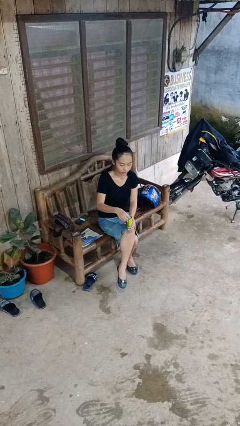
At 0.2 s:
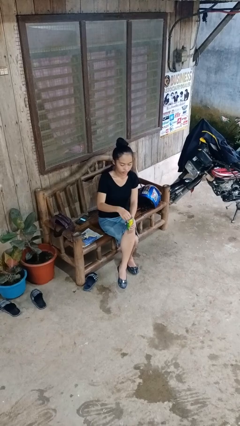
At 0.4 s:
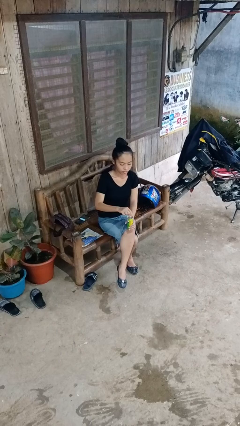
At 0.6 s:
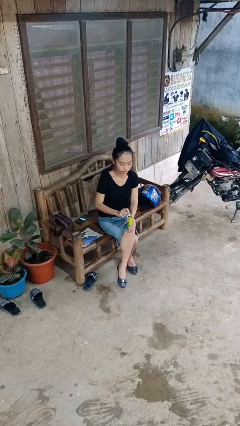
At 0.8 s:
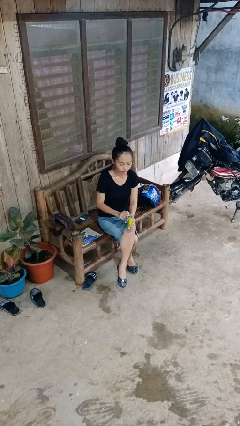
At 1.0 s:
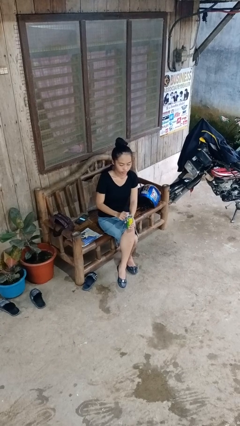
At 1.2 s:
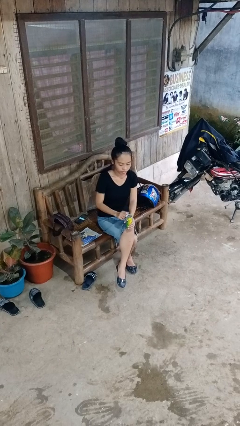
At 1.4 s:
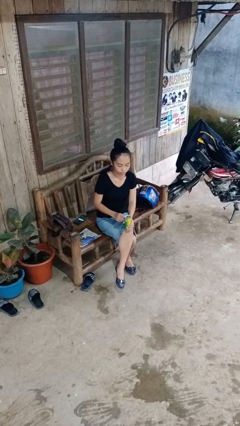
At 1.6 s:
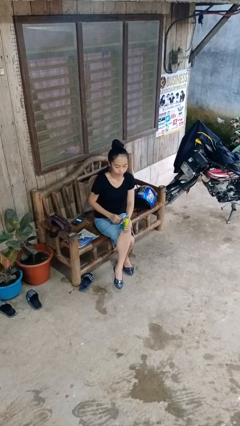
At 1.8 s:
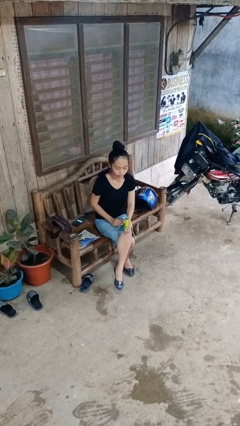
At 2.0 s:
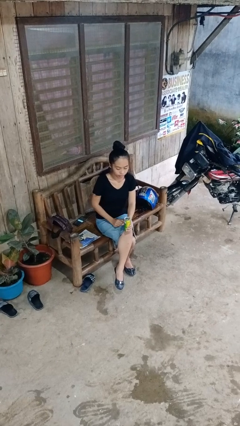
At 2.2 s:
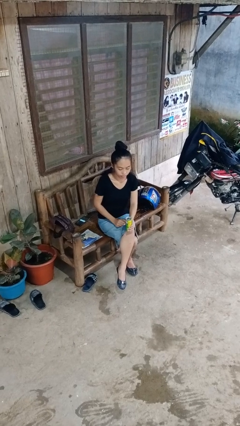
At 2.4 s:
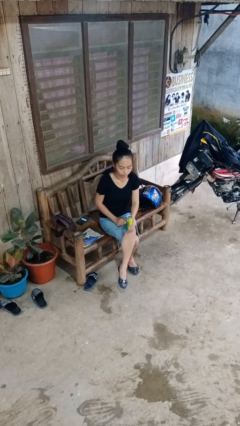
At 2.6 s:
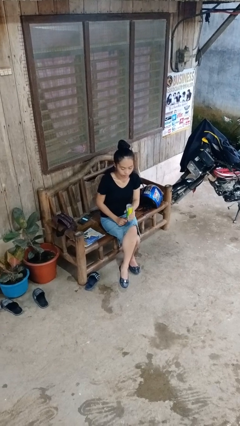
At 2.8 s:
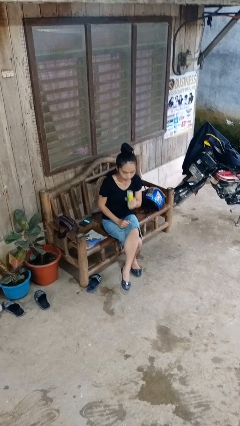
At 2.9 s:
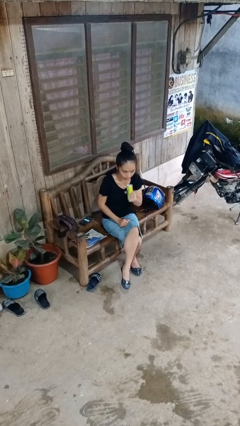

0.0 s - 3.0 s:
person opens beverage can

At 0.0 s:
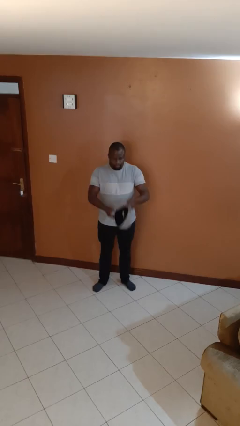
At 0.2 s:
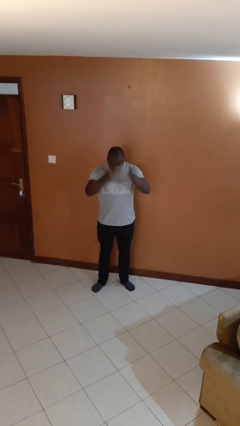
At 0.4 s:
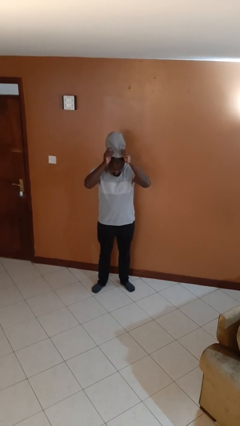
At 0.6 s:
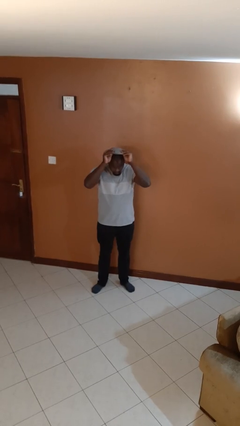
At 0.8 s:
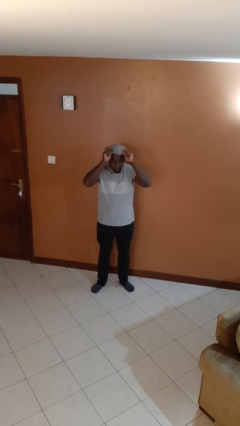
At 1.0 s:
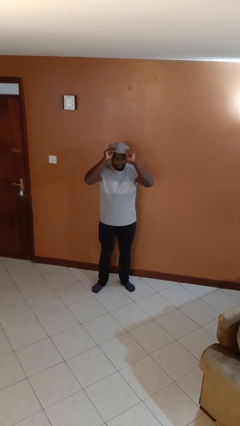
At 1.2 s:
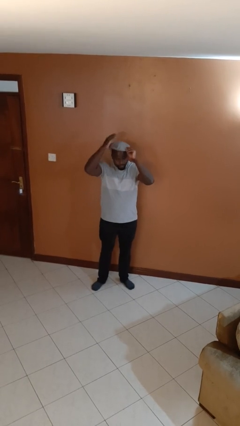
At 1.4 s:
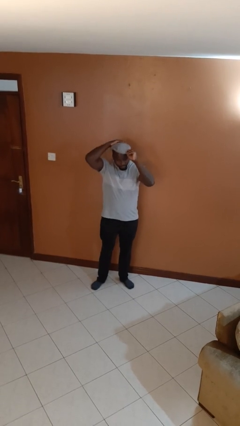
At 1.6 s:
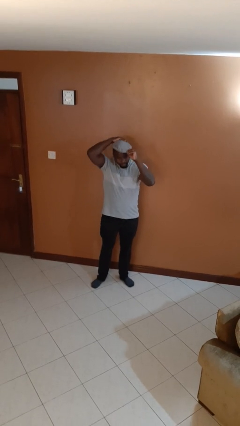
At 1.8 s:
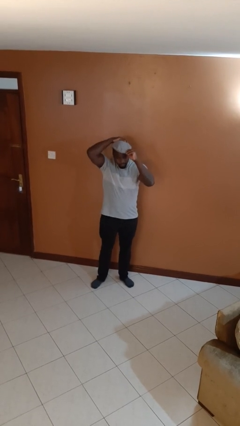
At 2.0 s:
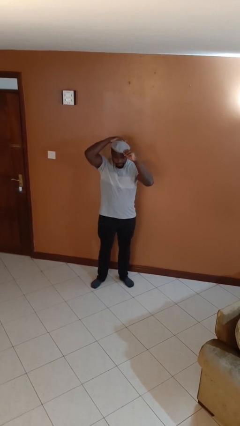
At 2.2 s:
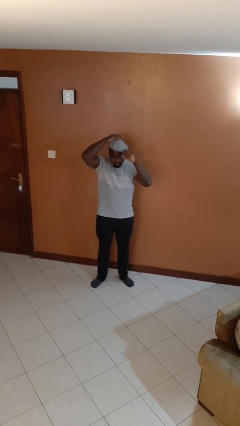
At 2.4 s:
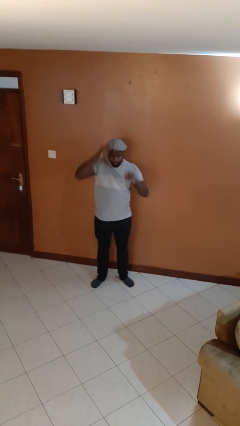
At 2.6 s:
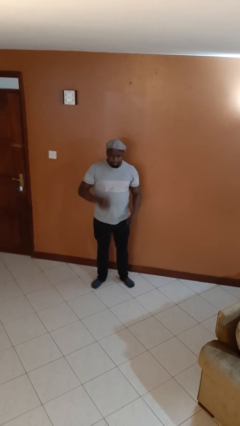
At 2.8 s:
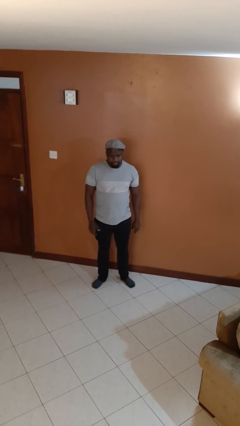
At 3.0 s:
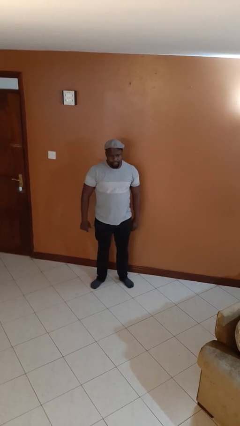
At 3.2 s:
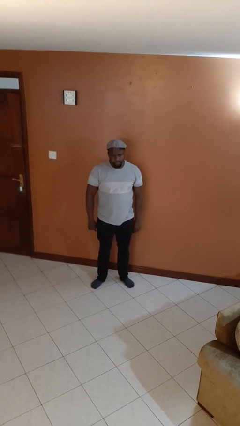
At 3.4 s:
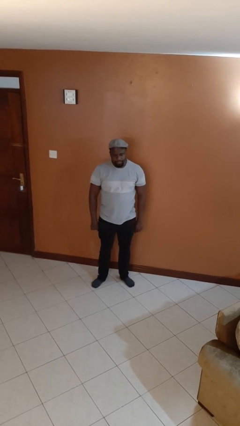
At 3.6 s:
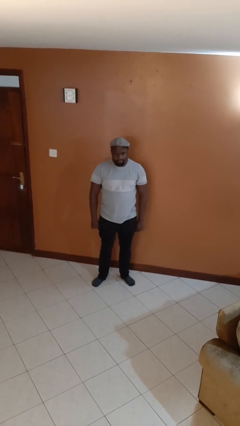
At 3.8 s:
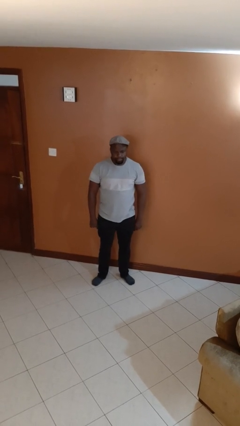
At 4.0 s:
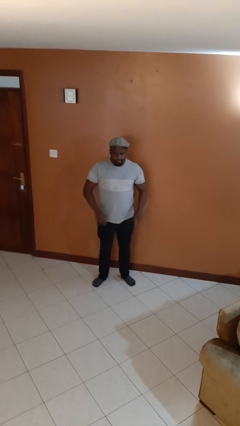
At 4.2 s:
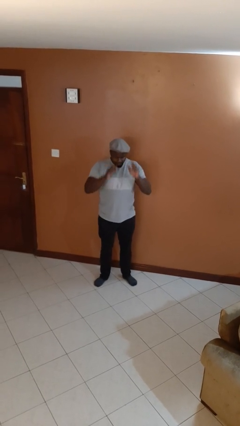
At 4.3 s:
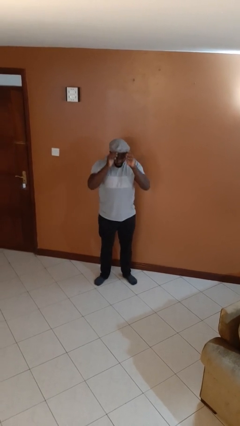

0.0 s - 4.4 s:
person puts on hat

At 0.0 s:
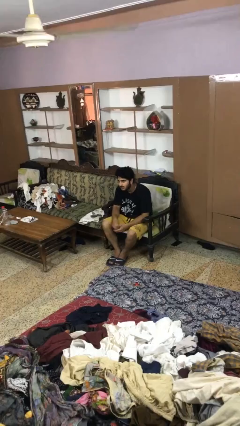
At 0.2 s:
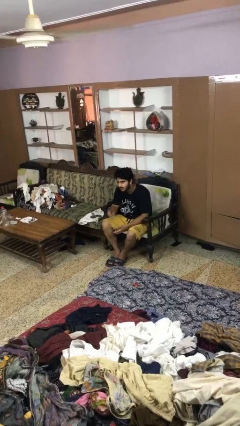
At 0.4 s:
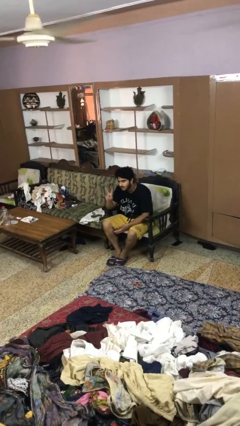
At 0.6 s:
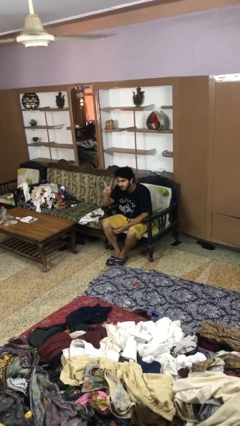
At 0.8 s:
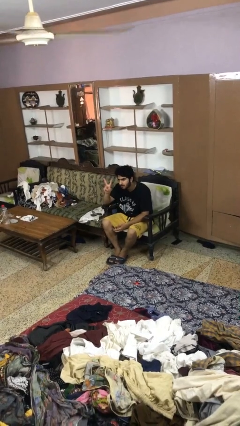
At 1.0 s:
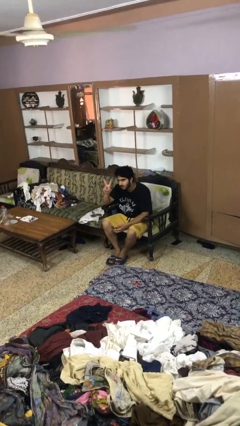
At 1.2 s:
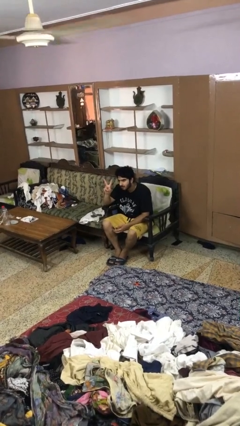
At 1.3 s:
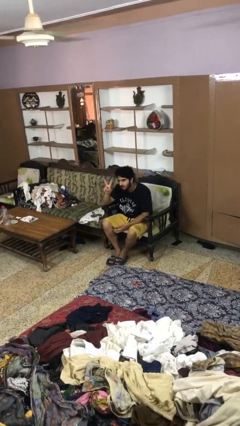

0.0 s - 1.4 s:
person gestures peace

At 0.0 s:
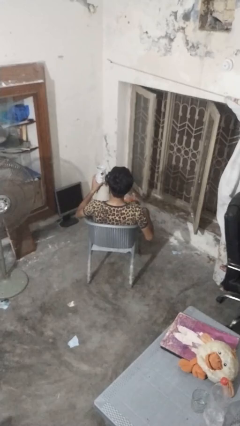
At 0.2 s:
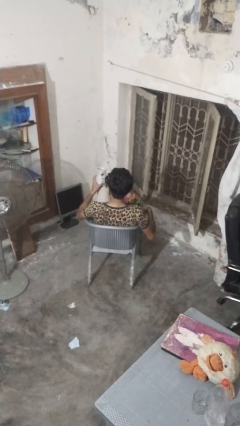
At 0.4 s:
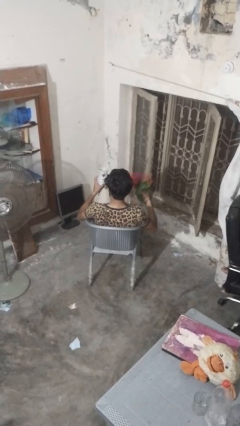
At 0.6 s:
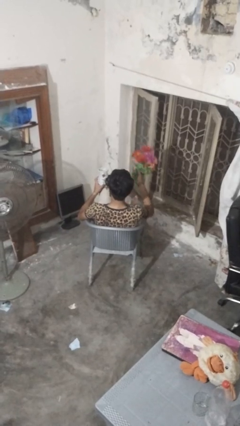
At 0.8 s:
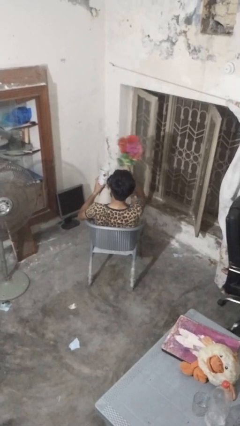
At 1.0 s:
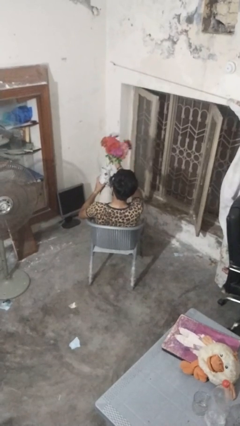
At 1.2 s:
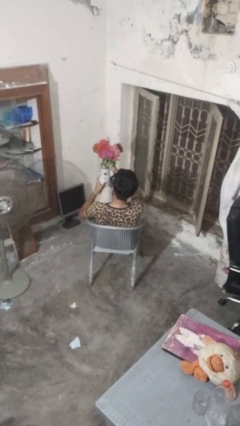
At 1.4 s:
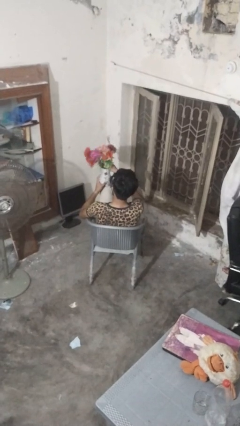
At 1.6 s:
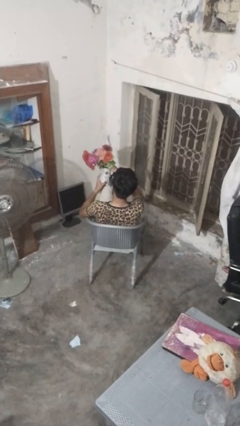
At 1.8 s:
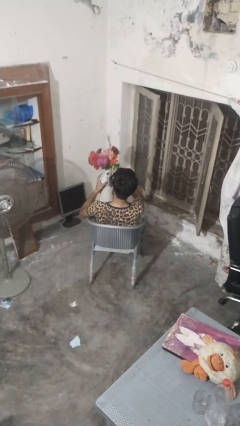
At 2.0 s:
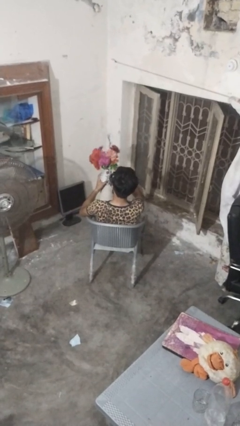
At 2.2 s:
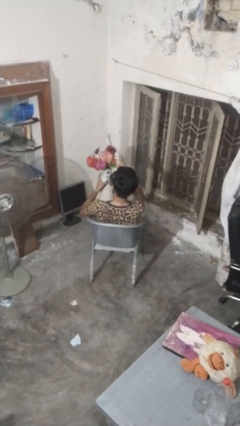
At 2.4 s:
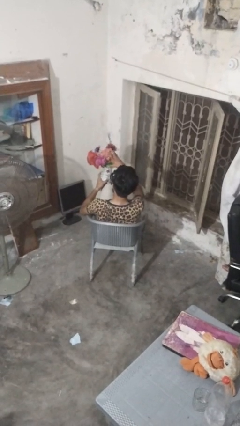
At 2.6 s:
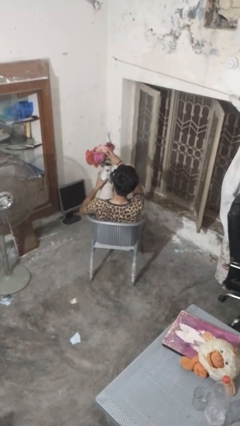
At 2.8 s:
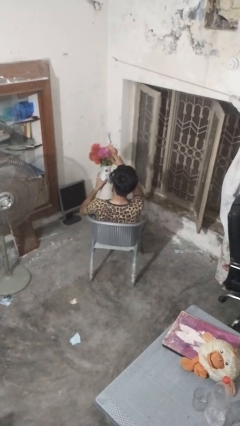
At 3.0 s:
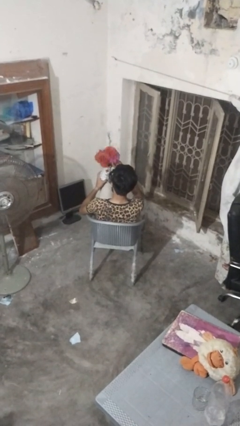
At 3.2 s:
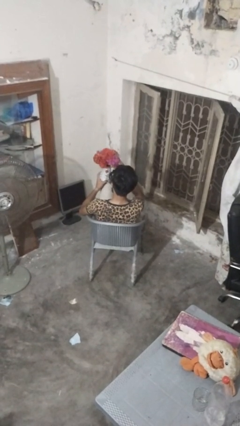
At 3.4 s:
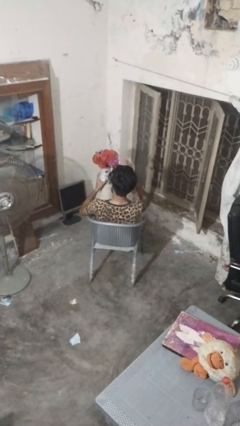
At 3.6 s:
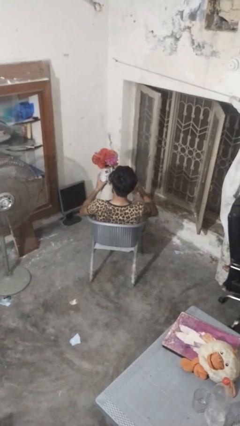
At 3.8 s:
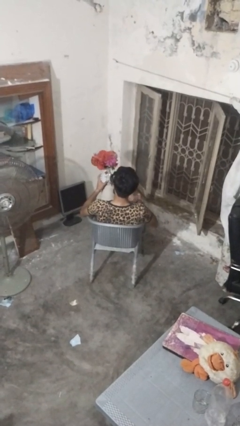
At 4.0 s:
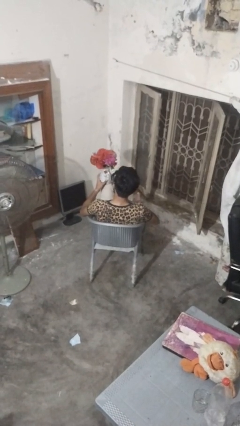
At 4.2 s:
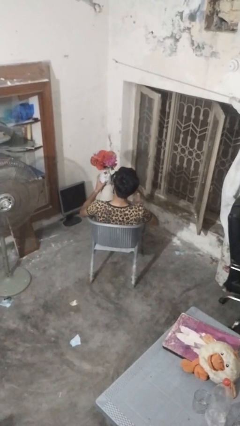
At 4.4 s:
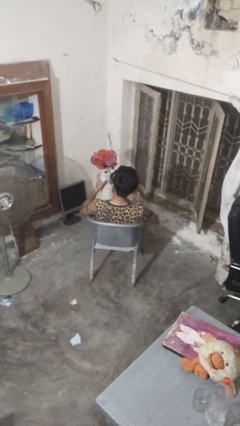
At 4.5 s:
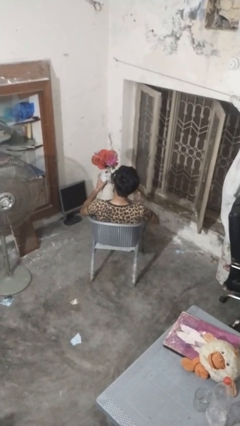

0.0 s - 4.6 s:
person arranges flowers in vase

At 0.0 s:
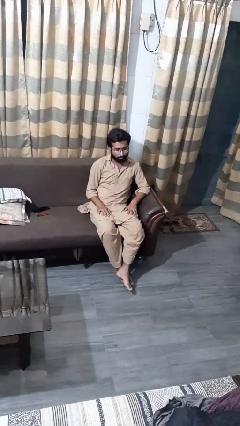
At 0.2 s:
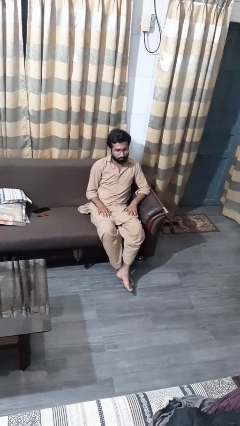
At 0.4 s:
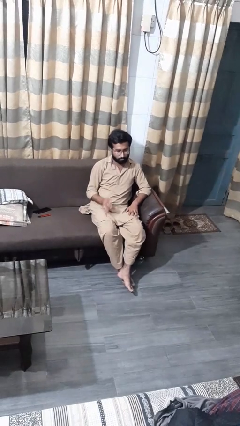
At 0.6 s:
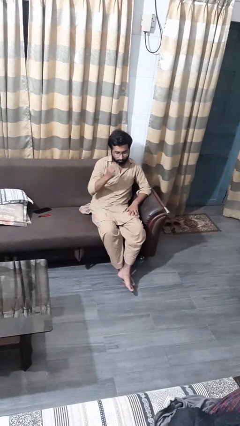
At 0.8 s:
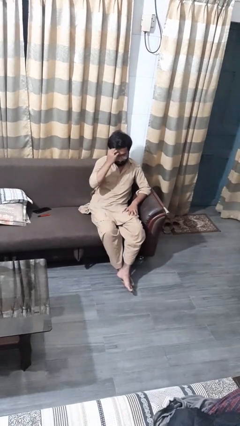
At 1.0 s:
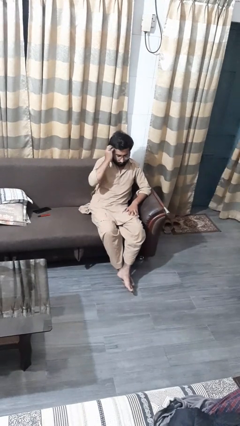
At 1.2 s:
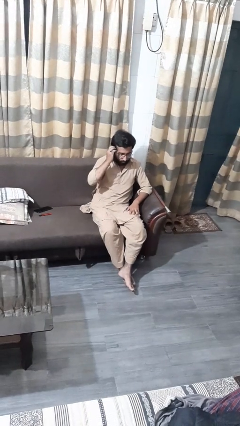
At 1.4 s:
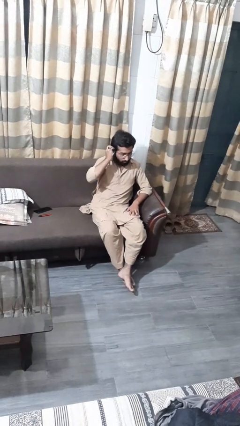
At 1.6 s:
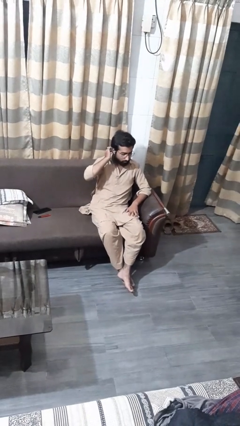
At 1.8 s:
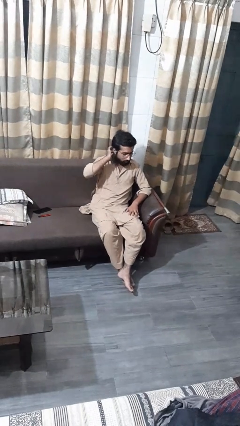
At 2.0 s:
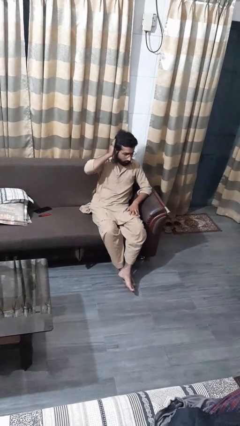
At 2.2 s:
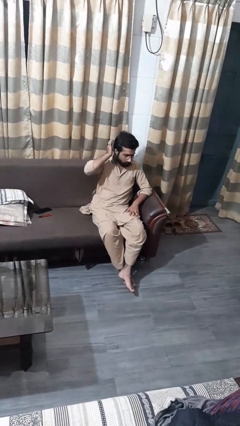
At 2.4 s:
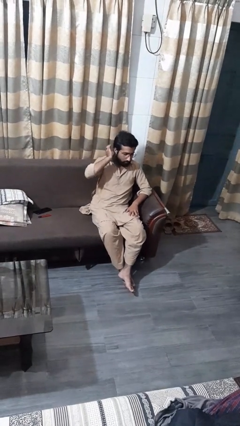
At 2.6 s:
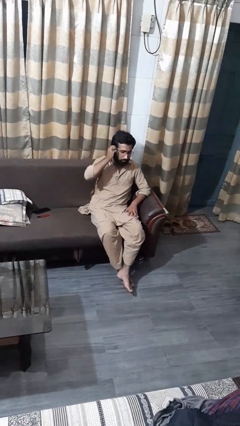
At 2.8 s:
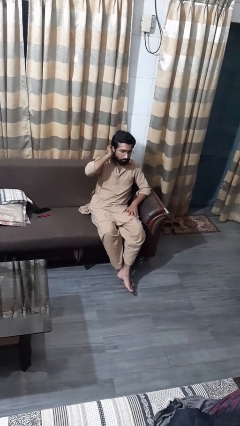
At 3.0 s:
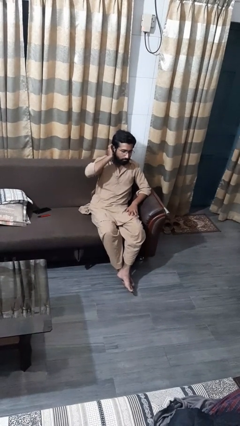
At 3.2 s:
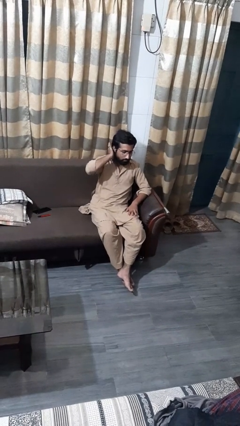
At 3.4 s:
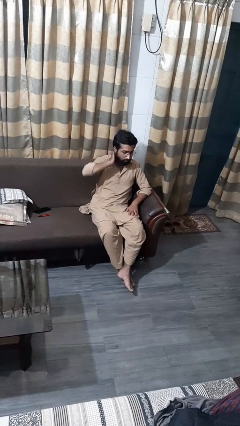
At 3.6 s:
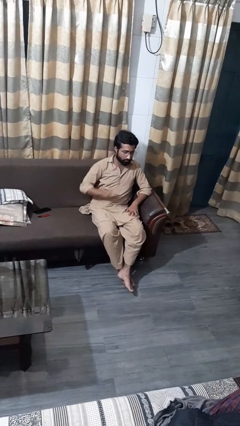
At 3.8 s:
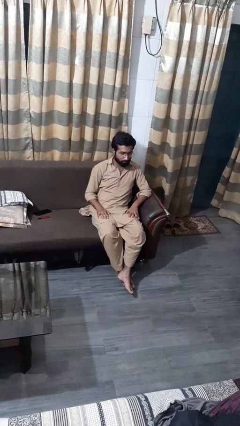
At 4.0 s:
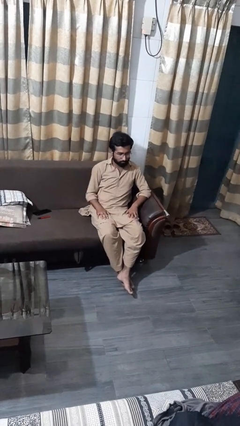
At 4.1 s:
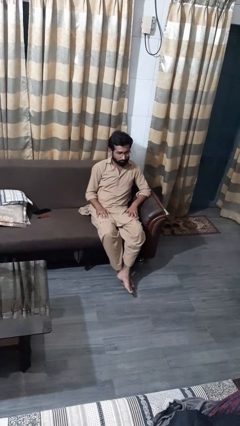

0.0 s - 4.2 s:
person strokes hair
